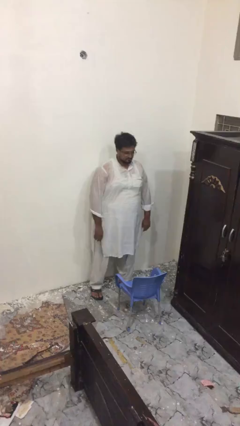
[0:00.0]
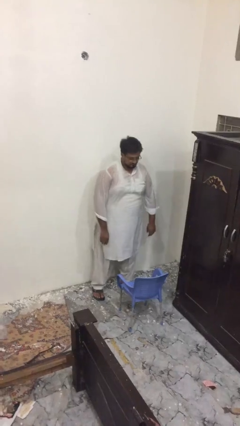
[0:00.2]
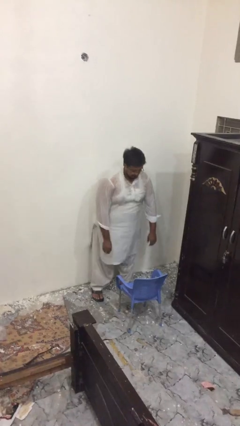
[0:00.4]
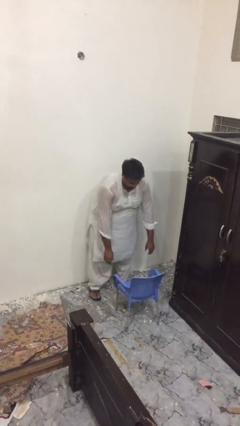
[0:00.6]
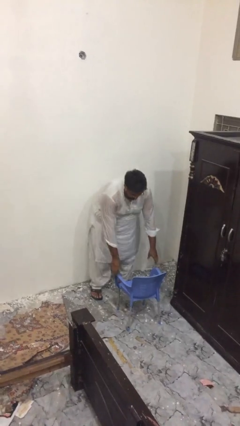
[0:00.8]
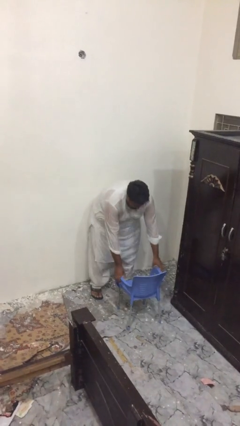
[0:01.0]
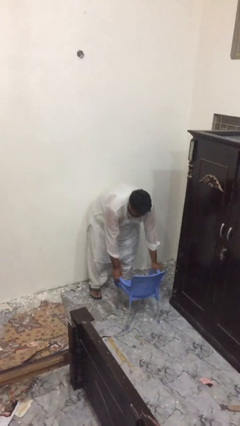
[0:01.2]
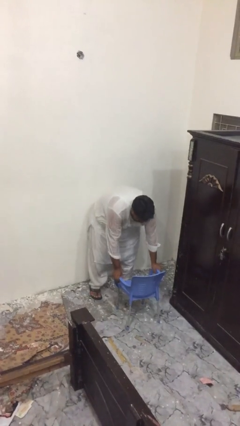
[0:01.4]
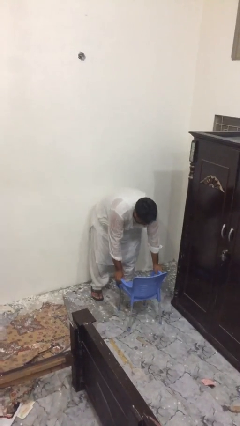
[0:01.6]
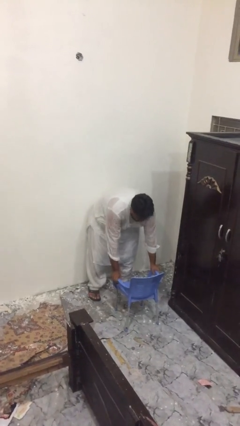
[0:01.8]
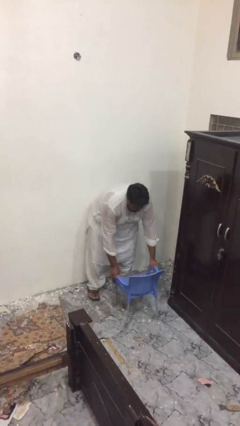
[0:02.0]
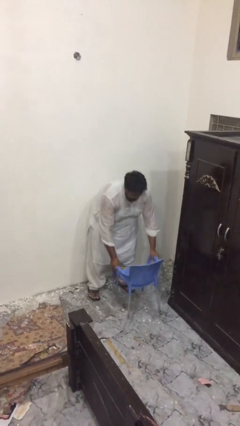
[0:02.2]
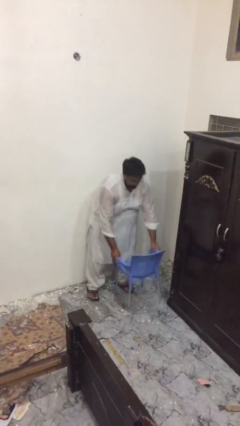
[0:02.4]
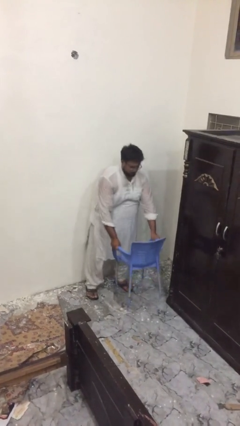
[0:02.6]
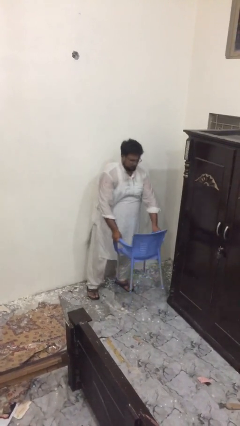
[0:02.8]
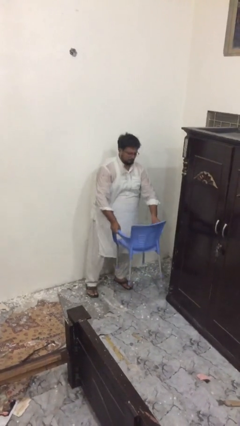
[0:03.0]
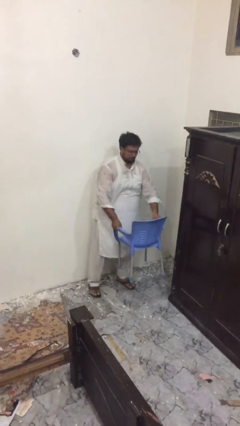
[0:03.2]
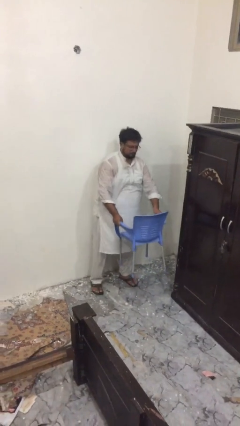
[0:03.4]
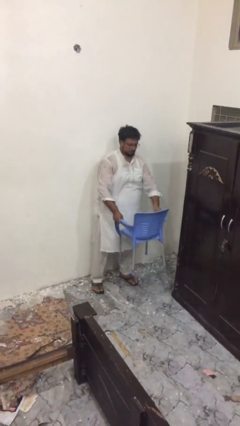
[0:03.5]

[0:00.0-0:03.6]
person picks up object from floor

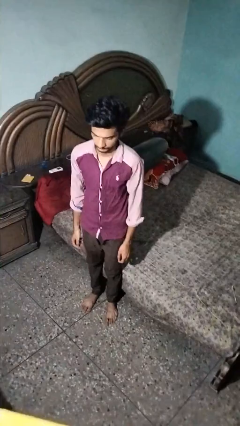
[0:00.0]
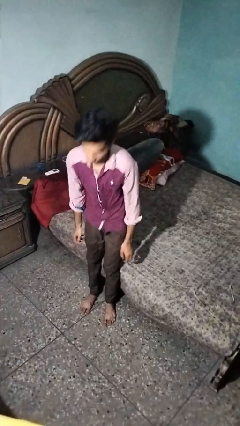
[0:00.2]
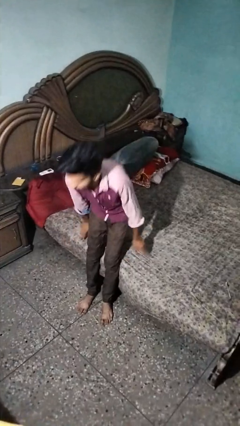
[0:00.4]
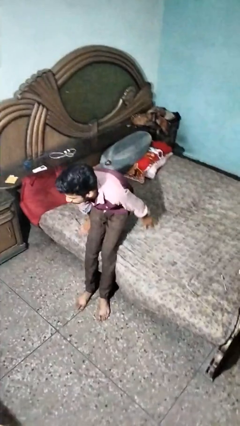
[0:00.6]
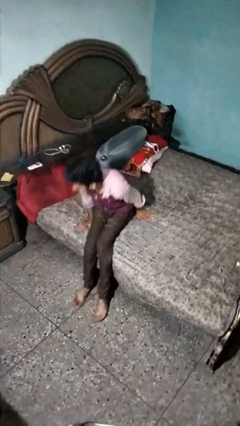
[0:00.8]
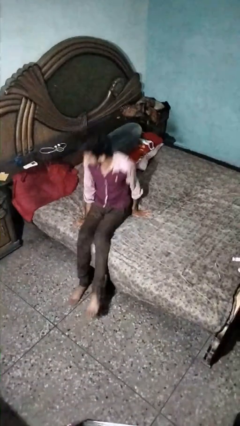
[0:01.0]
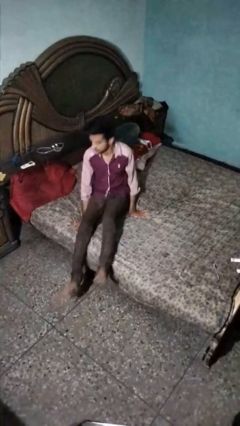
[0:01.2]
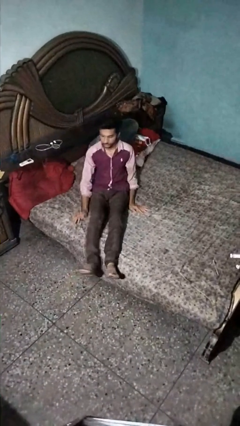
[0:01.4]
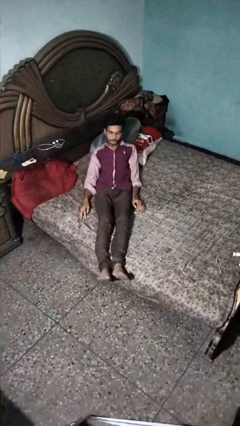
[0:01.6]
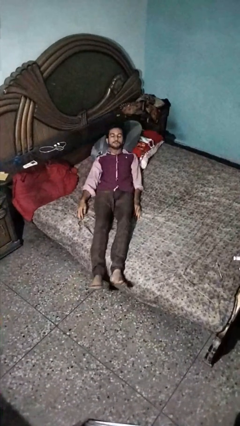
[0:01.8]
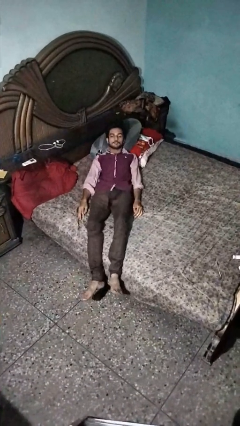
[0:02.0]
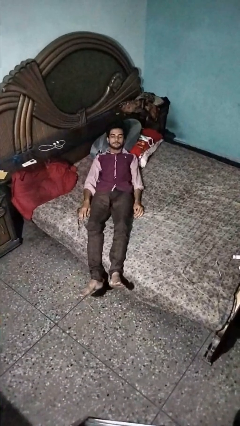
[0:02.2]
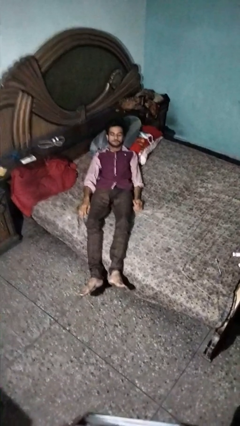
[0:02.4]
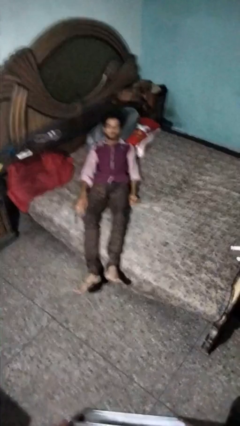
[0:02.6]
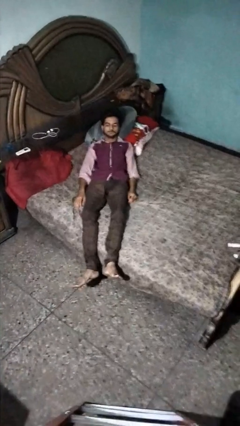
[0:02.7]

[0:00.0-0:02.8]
person lies down on bed

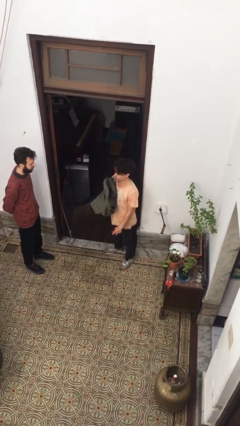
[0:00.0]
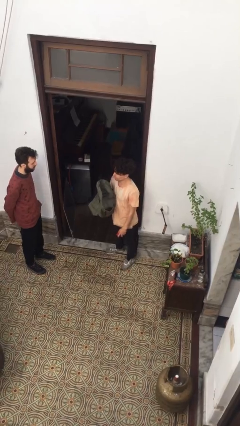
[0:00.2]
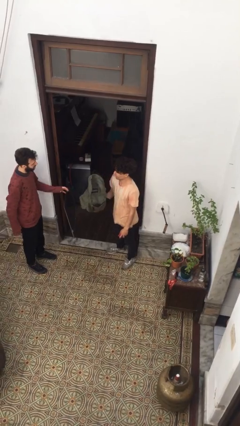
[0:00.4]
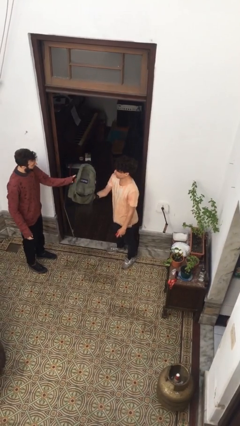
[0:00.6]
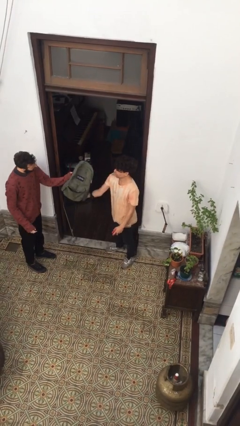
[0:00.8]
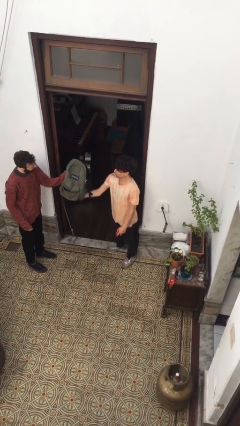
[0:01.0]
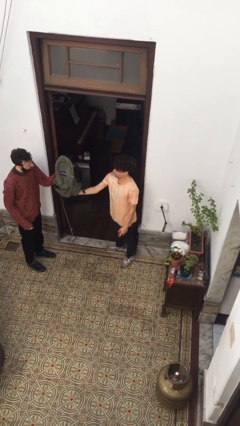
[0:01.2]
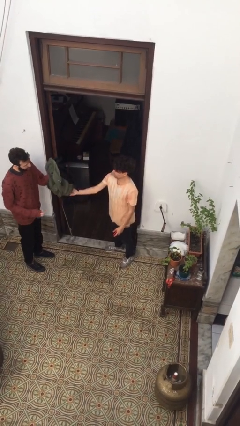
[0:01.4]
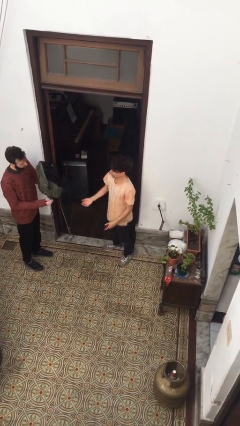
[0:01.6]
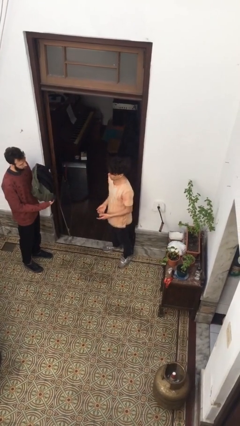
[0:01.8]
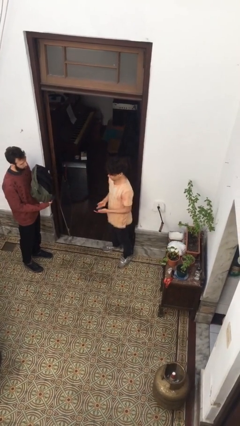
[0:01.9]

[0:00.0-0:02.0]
person transfers object to person

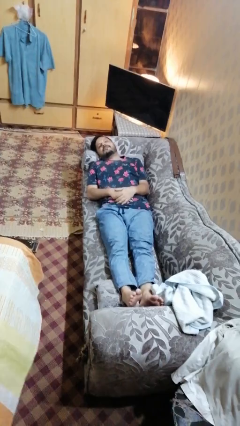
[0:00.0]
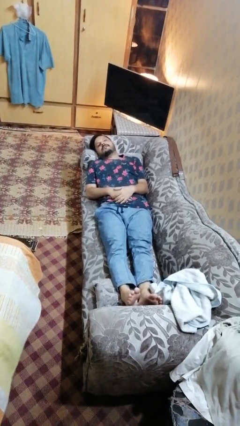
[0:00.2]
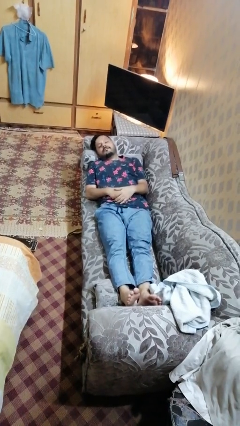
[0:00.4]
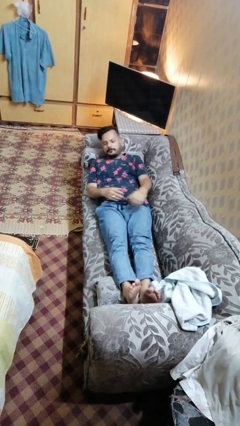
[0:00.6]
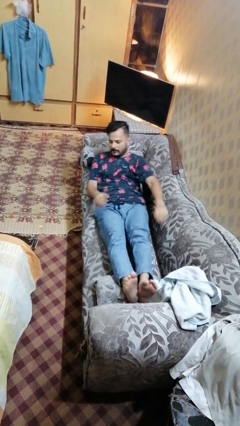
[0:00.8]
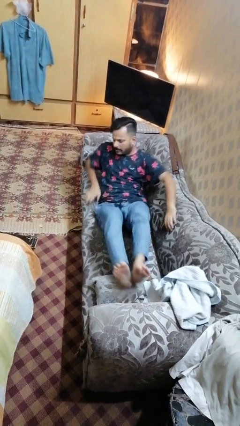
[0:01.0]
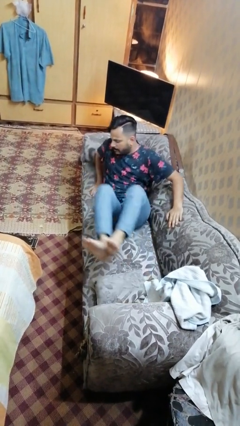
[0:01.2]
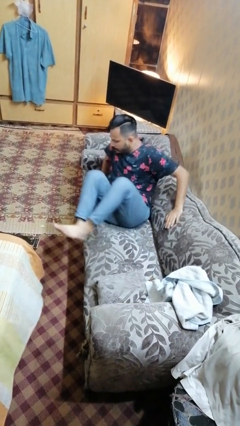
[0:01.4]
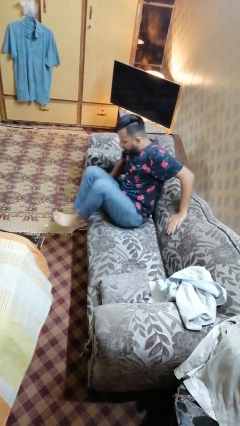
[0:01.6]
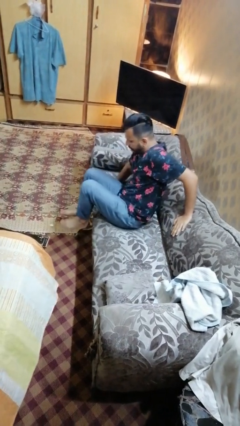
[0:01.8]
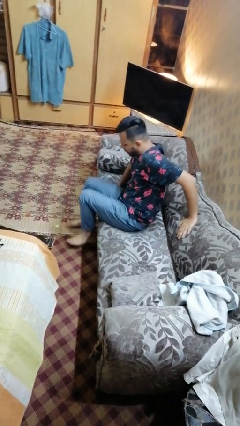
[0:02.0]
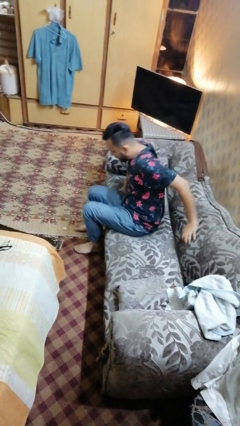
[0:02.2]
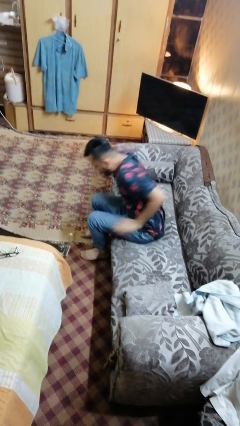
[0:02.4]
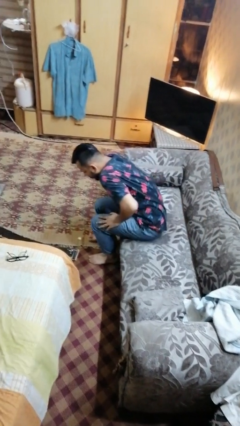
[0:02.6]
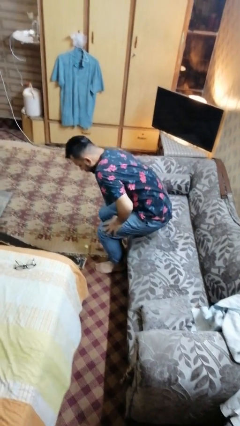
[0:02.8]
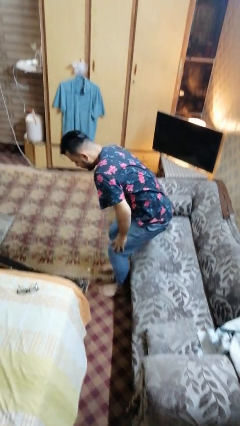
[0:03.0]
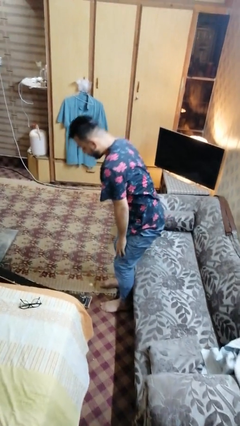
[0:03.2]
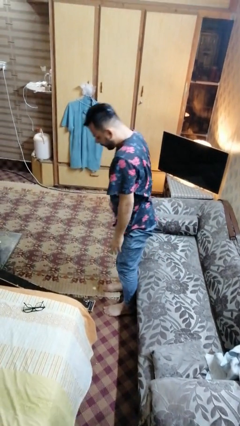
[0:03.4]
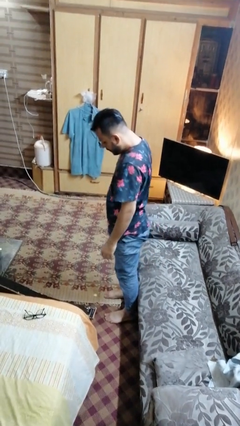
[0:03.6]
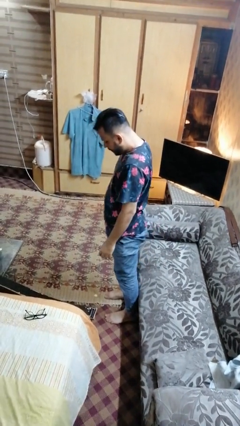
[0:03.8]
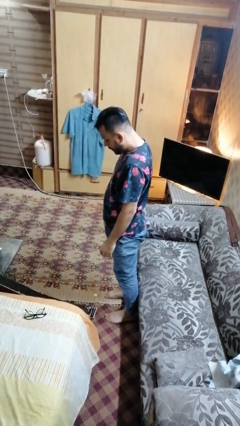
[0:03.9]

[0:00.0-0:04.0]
person stands up

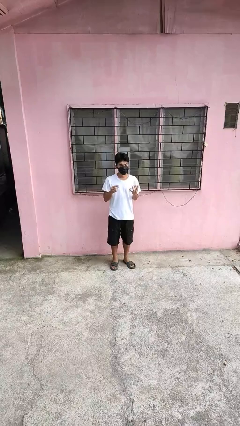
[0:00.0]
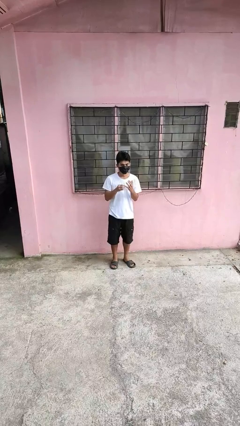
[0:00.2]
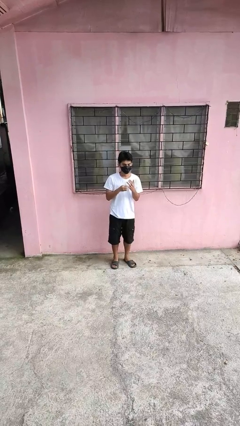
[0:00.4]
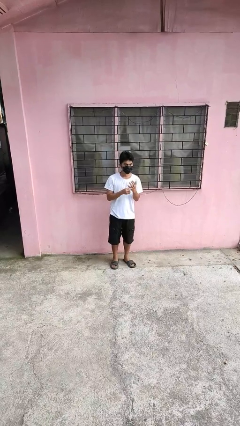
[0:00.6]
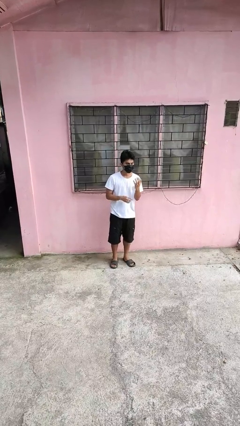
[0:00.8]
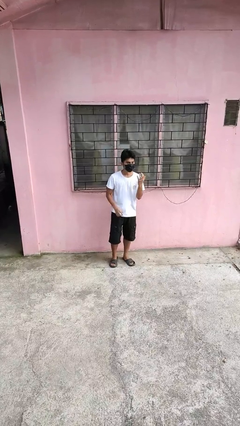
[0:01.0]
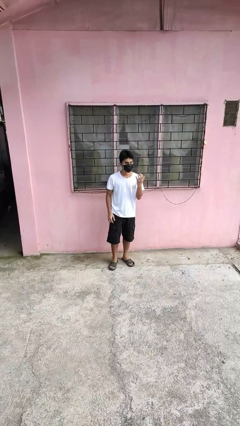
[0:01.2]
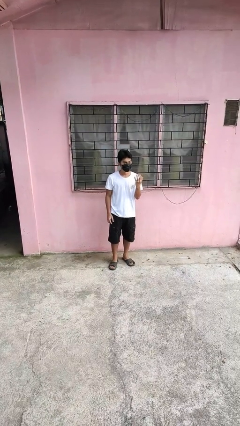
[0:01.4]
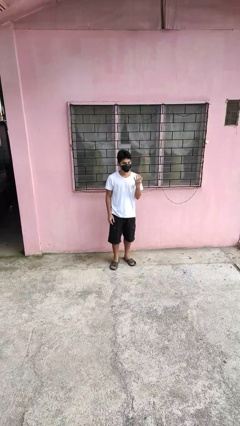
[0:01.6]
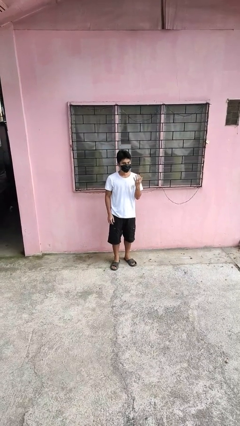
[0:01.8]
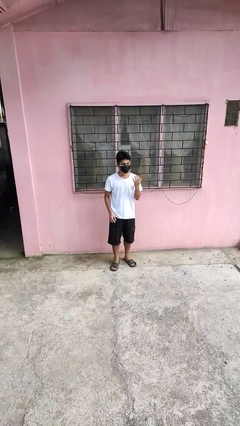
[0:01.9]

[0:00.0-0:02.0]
person puts on ring

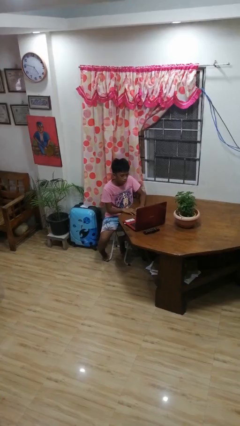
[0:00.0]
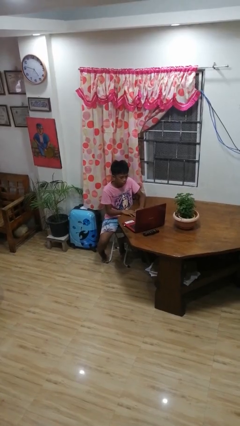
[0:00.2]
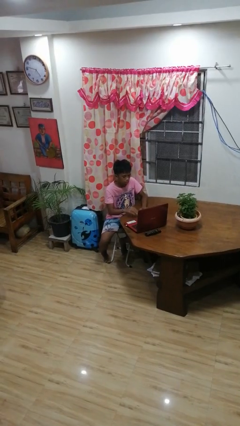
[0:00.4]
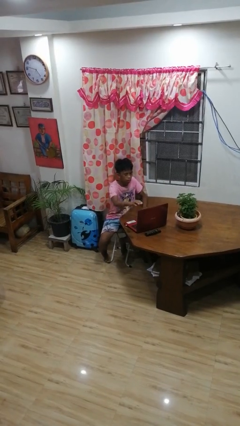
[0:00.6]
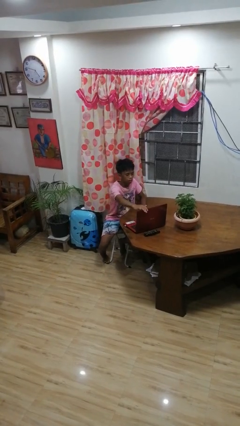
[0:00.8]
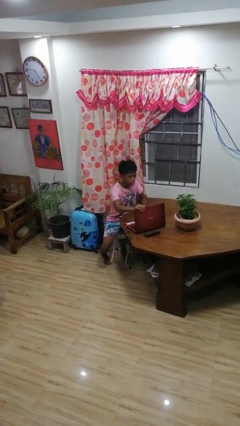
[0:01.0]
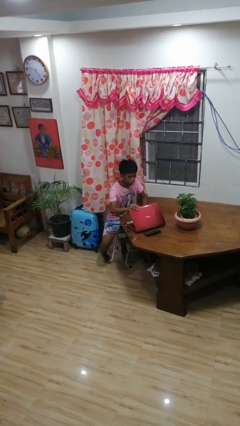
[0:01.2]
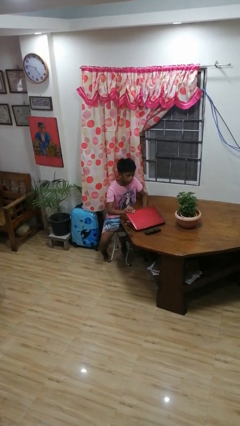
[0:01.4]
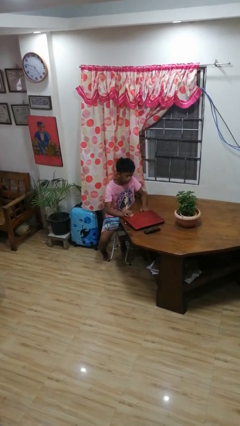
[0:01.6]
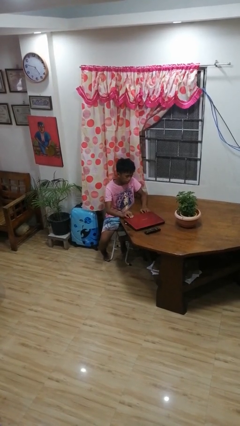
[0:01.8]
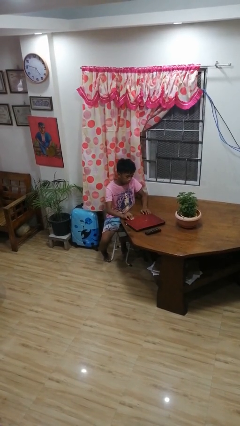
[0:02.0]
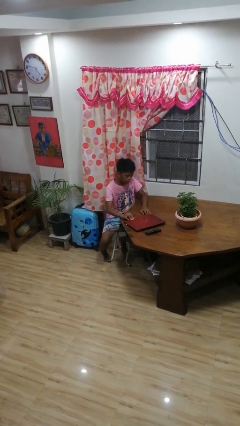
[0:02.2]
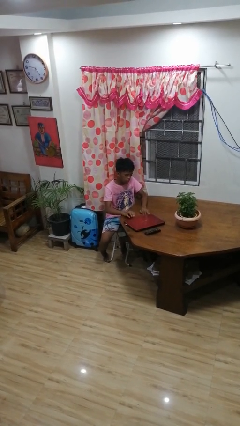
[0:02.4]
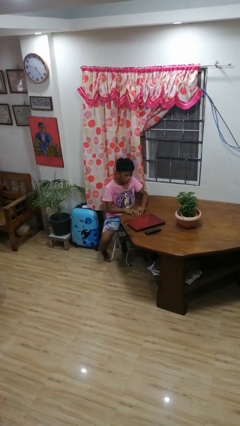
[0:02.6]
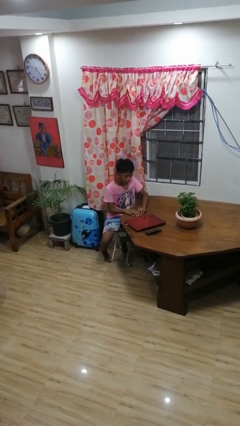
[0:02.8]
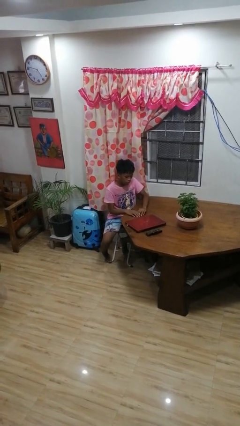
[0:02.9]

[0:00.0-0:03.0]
person closes laptop

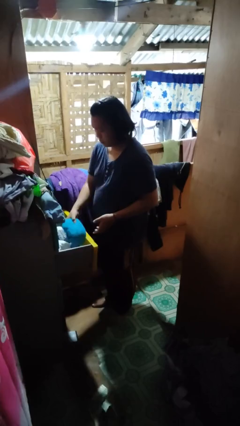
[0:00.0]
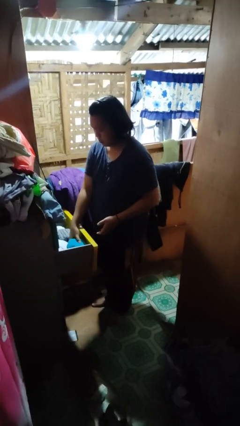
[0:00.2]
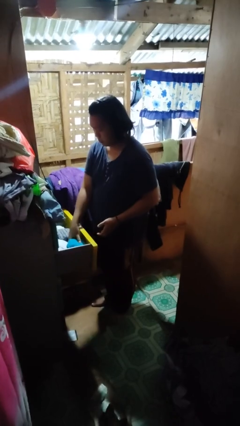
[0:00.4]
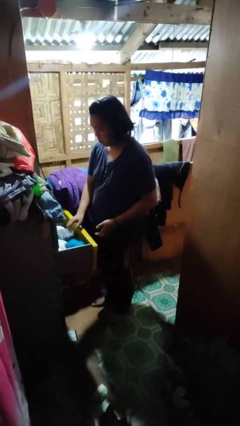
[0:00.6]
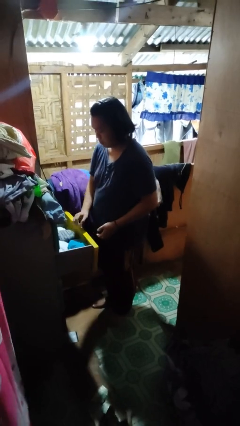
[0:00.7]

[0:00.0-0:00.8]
person puts clothes into dresser
